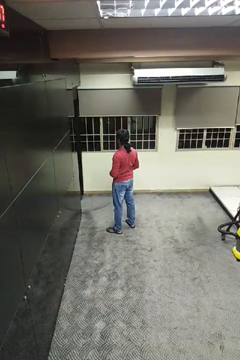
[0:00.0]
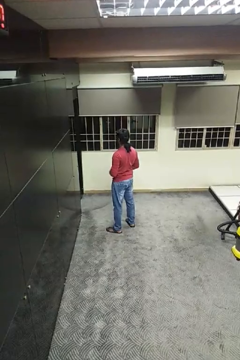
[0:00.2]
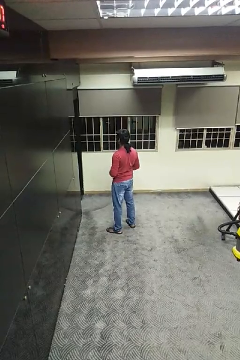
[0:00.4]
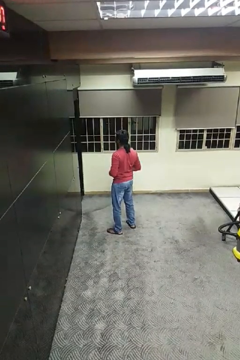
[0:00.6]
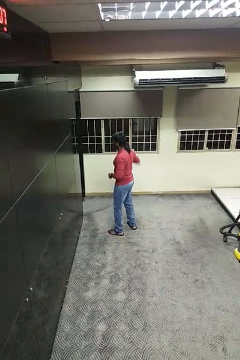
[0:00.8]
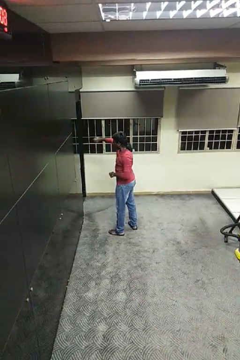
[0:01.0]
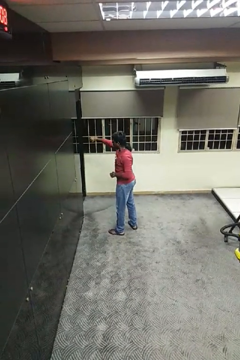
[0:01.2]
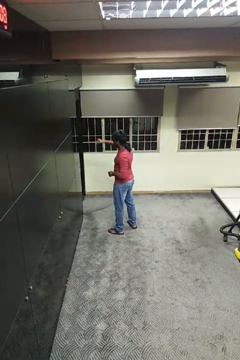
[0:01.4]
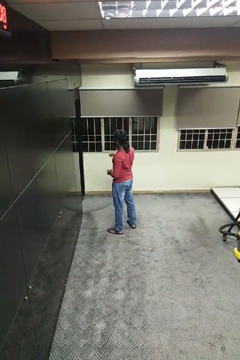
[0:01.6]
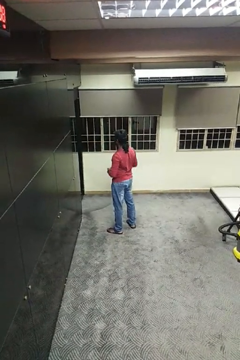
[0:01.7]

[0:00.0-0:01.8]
person punches

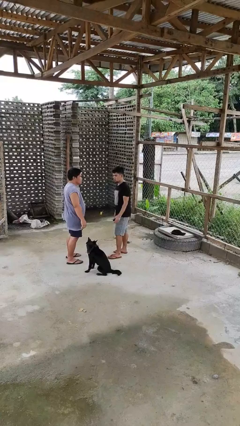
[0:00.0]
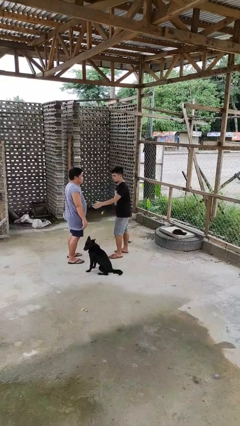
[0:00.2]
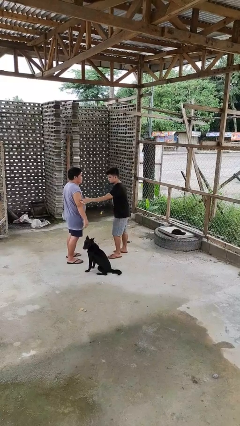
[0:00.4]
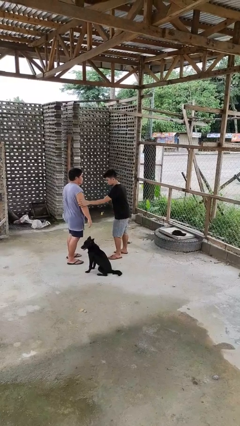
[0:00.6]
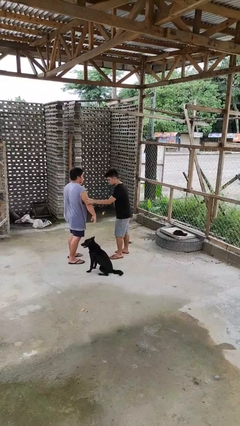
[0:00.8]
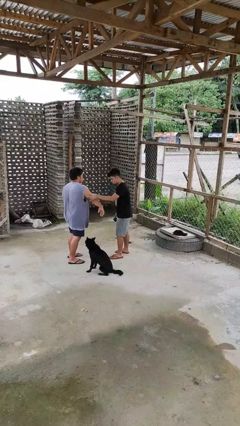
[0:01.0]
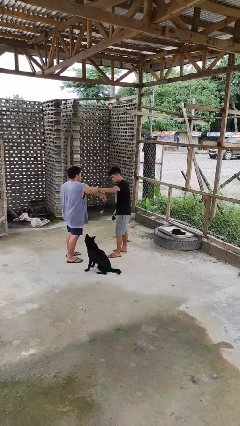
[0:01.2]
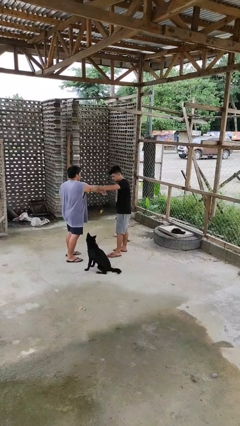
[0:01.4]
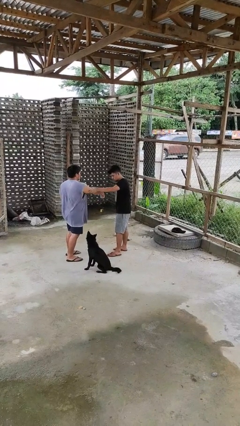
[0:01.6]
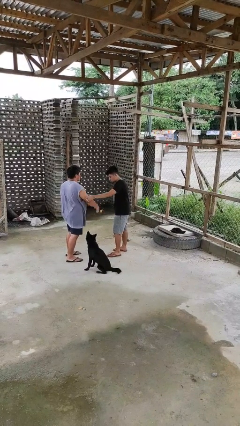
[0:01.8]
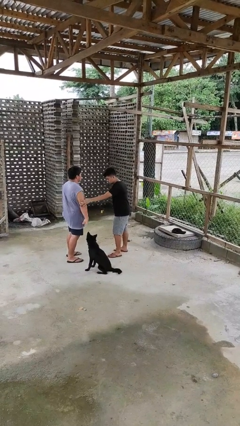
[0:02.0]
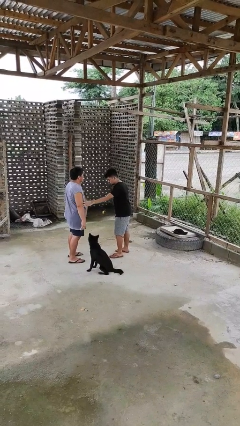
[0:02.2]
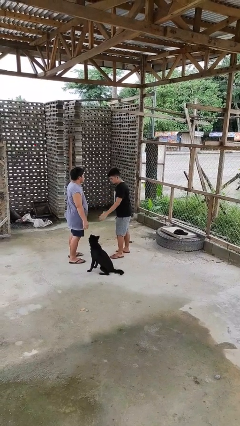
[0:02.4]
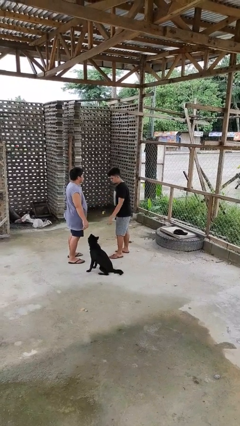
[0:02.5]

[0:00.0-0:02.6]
person grabs person by bicep

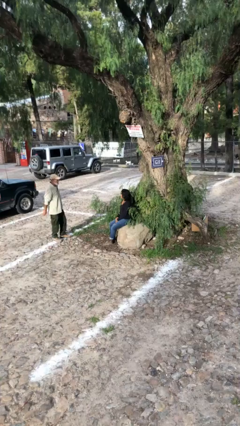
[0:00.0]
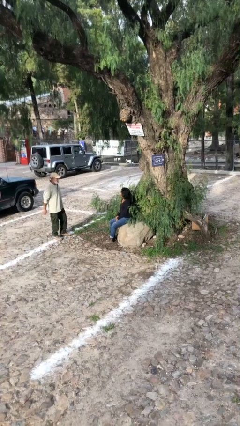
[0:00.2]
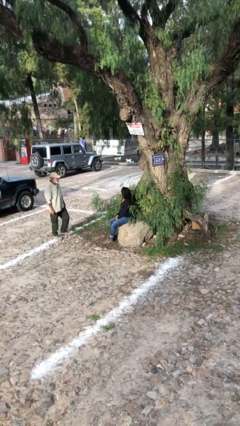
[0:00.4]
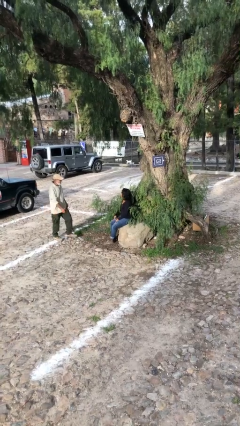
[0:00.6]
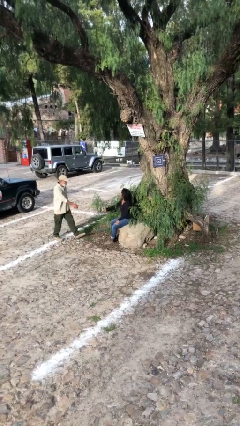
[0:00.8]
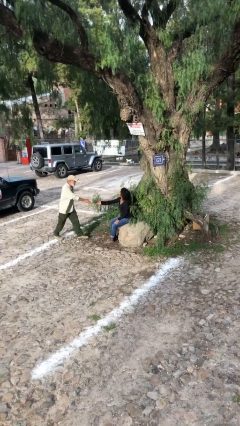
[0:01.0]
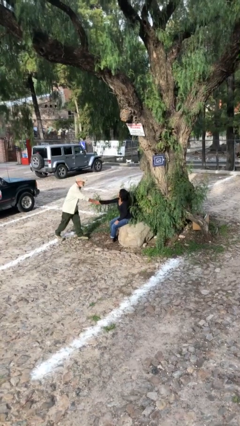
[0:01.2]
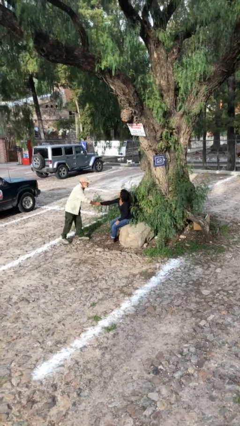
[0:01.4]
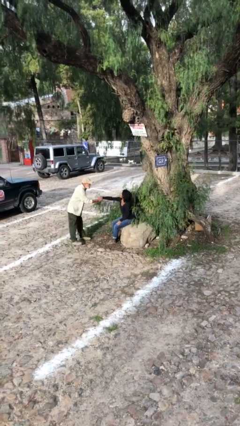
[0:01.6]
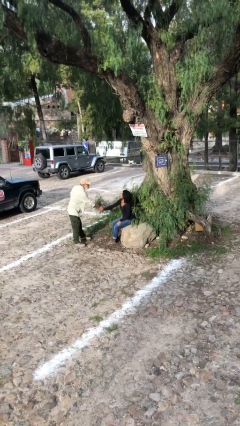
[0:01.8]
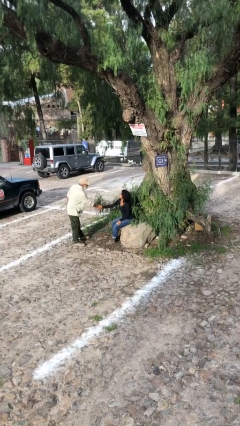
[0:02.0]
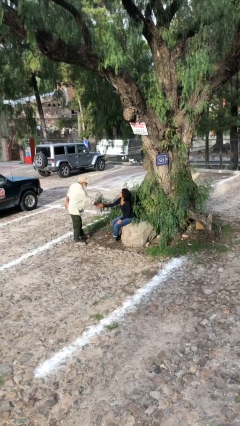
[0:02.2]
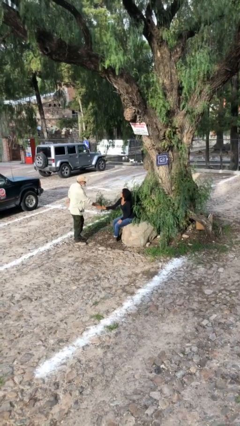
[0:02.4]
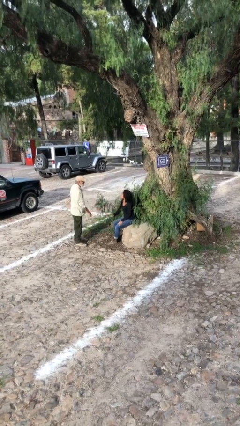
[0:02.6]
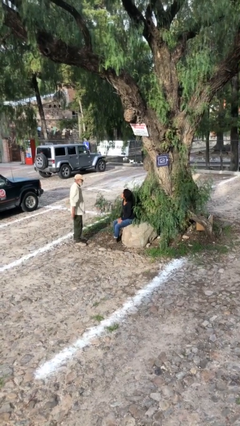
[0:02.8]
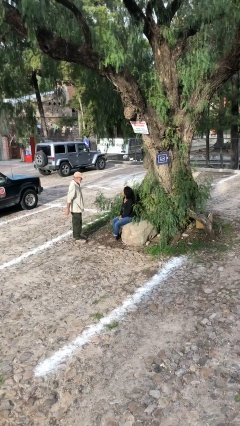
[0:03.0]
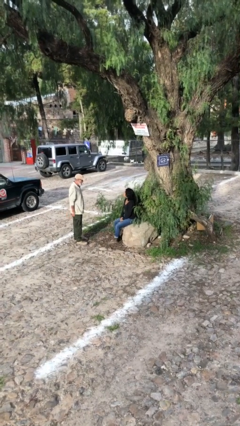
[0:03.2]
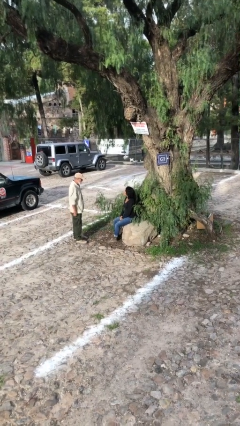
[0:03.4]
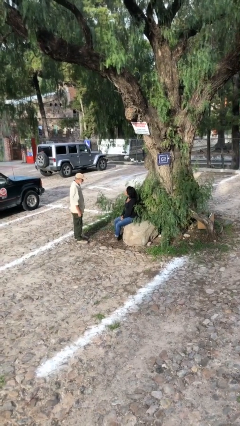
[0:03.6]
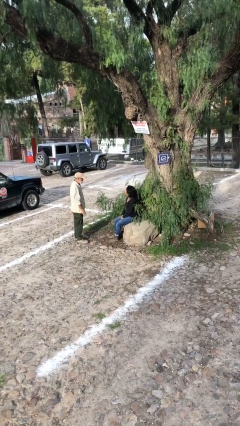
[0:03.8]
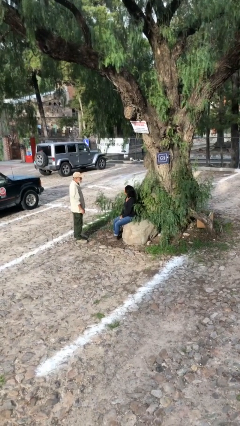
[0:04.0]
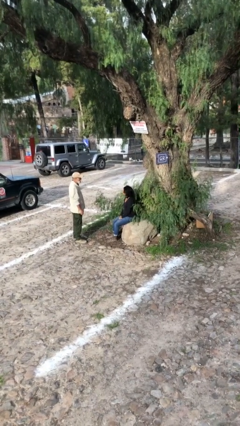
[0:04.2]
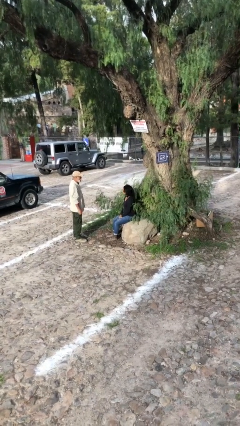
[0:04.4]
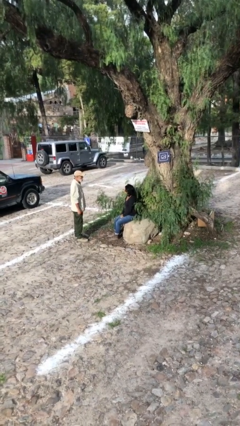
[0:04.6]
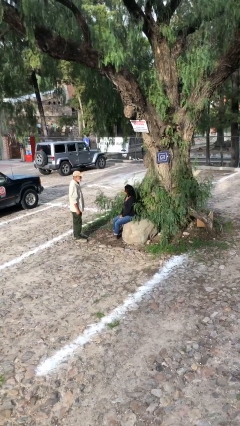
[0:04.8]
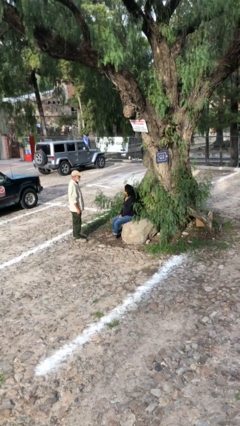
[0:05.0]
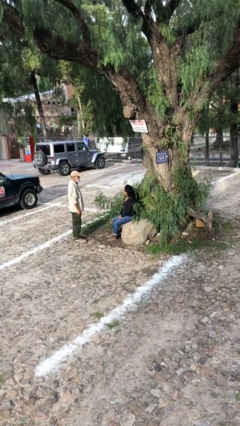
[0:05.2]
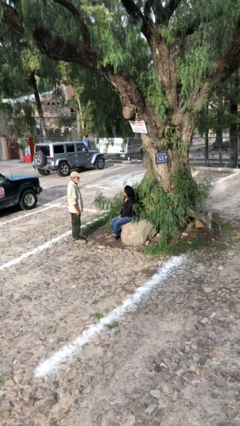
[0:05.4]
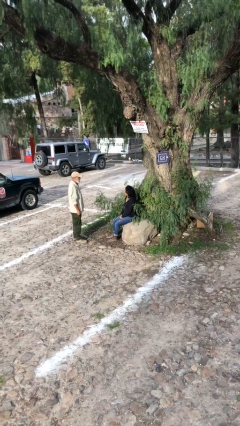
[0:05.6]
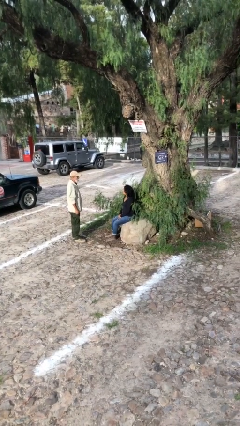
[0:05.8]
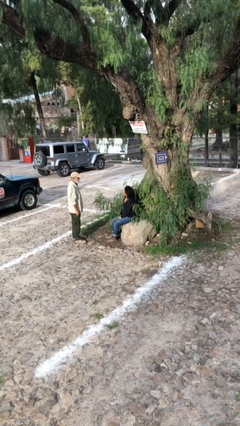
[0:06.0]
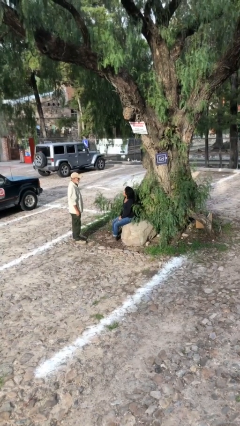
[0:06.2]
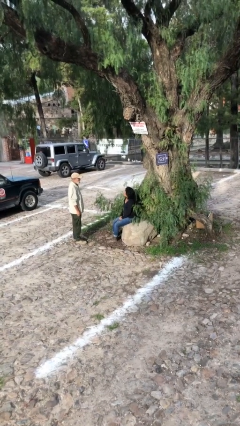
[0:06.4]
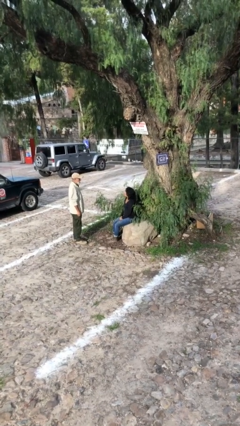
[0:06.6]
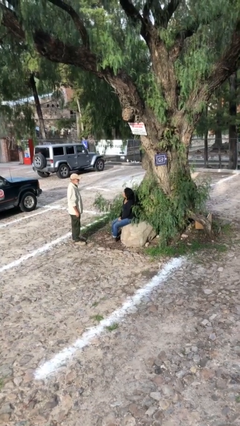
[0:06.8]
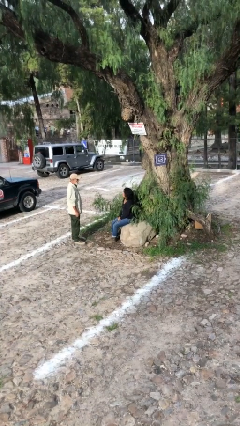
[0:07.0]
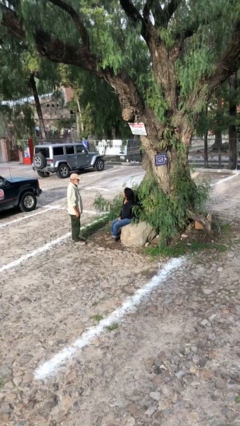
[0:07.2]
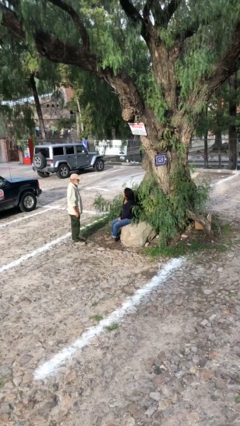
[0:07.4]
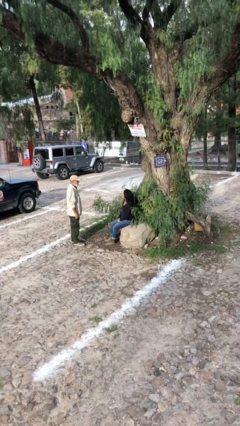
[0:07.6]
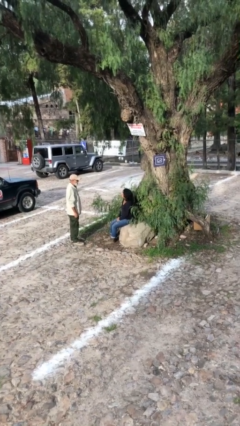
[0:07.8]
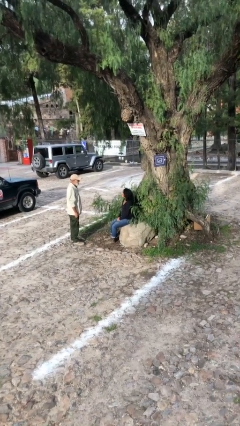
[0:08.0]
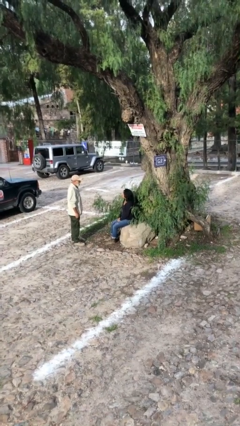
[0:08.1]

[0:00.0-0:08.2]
person shakes hand

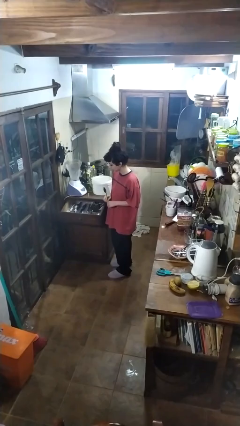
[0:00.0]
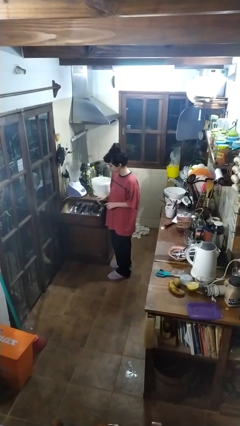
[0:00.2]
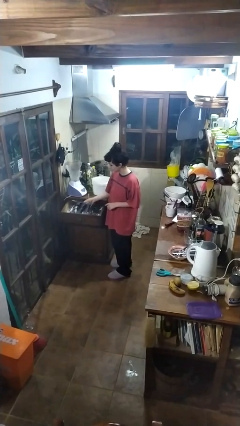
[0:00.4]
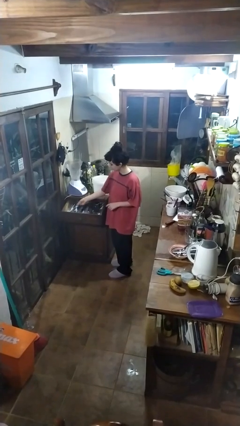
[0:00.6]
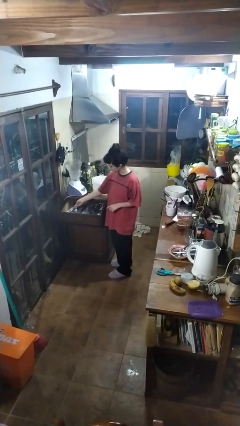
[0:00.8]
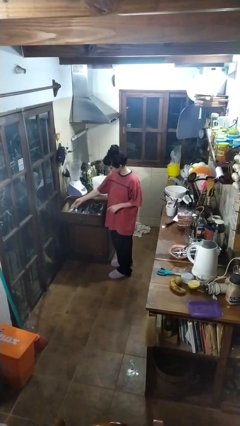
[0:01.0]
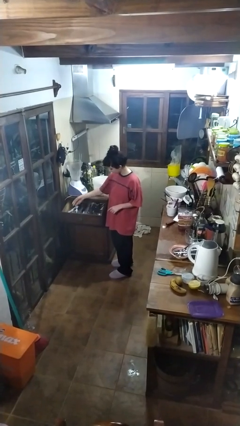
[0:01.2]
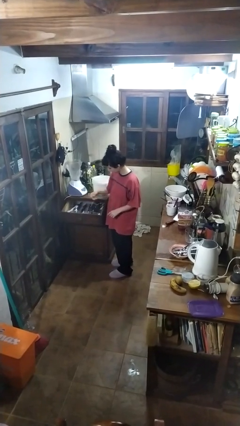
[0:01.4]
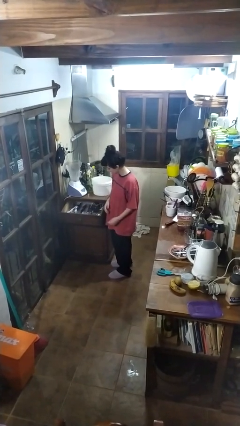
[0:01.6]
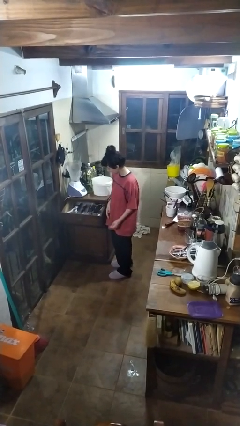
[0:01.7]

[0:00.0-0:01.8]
person puts object into kitchen drawer

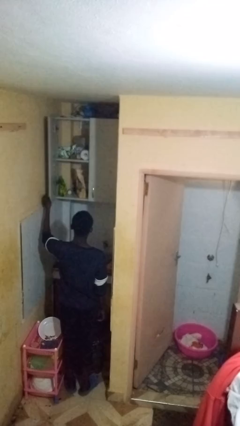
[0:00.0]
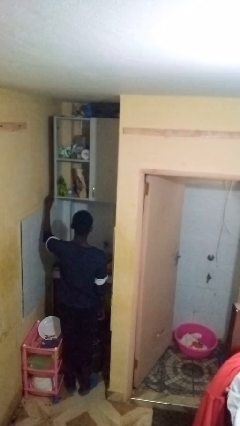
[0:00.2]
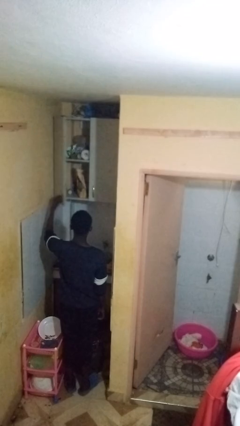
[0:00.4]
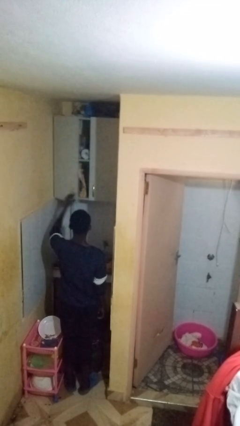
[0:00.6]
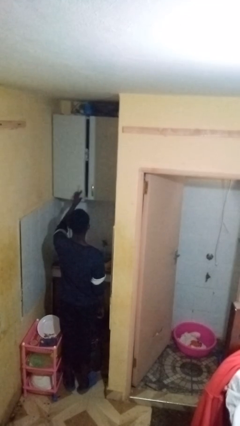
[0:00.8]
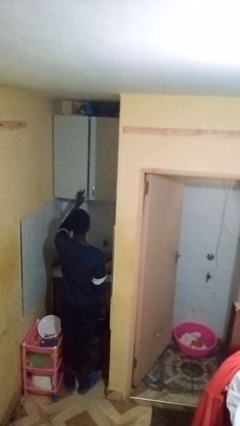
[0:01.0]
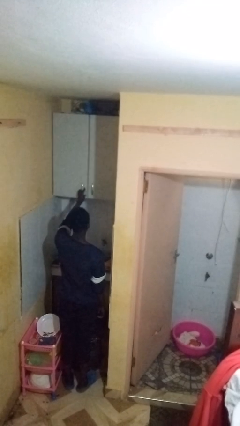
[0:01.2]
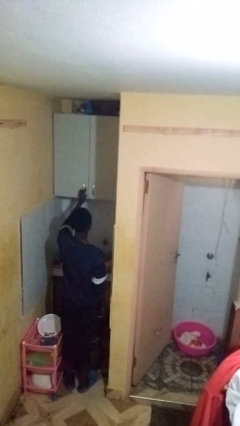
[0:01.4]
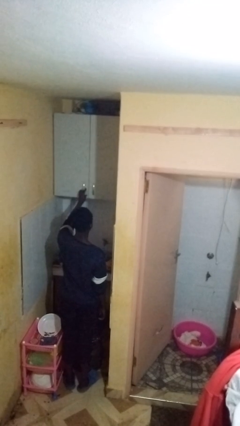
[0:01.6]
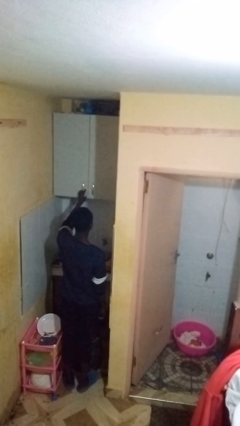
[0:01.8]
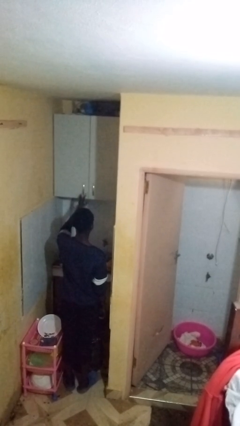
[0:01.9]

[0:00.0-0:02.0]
person closes cabinet

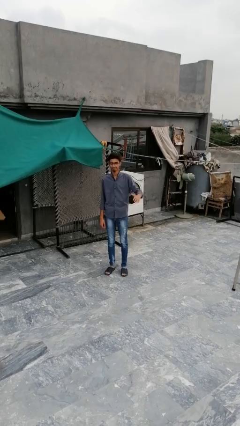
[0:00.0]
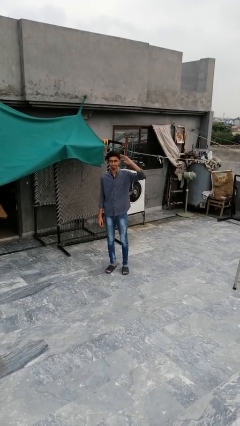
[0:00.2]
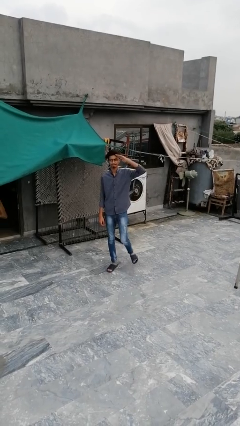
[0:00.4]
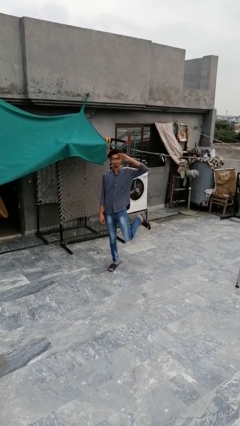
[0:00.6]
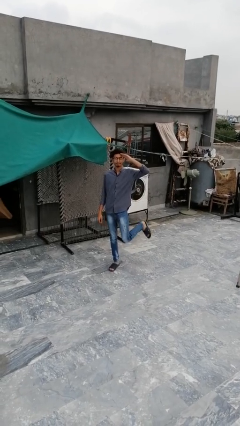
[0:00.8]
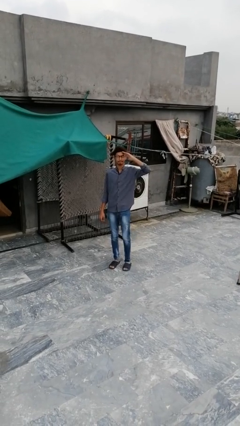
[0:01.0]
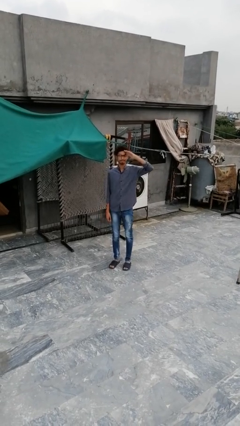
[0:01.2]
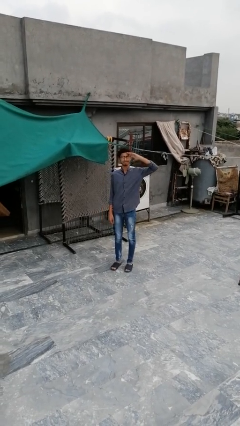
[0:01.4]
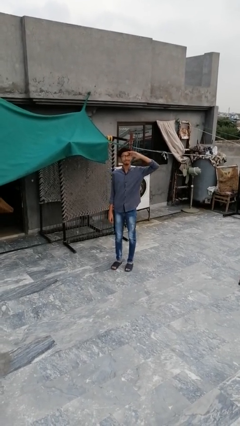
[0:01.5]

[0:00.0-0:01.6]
person salutes
